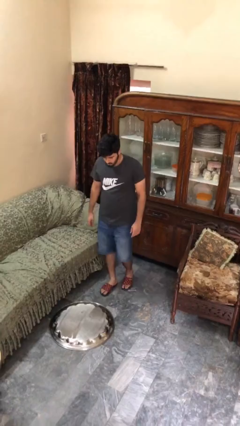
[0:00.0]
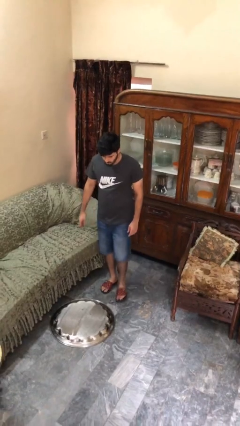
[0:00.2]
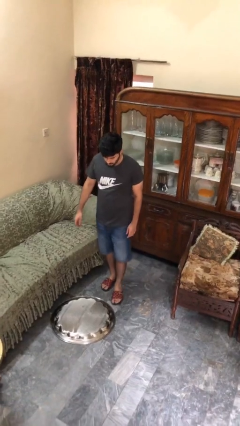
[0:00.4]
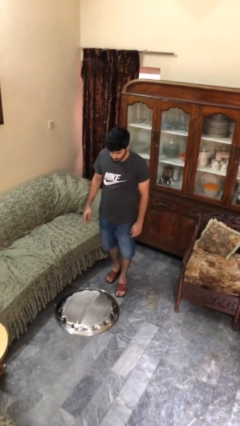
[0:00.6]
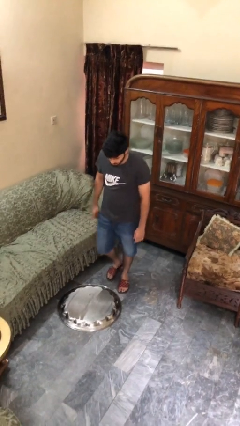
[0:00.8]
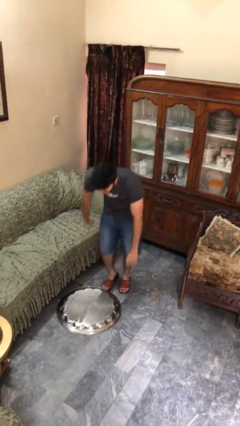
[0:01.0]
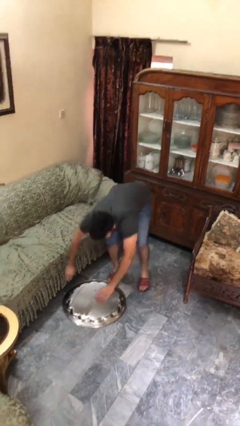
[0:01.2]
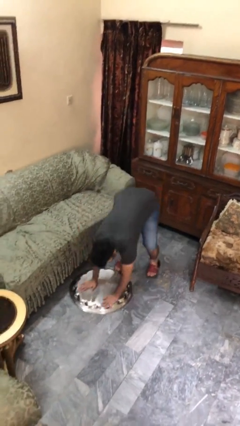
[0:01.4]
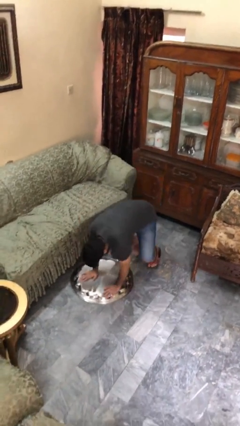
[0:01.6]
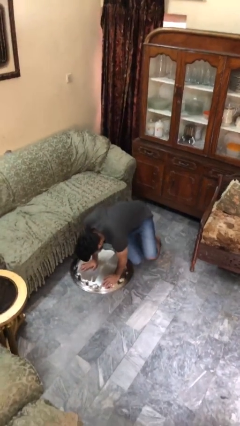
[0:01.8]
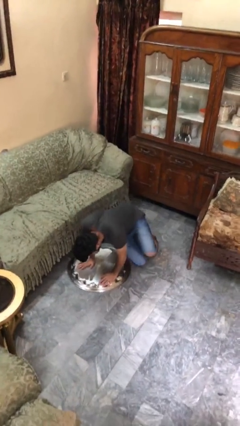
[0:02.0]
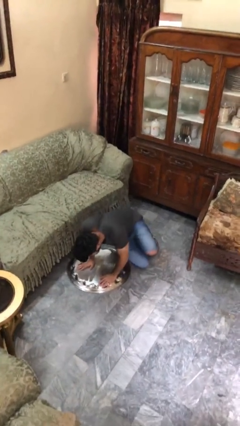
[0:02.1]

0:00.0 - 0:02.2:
person trips on object on floor

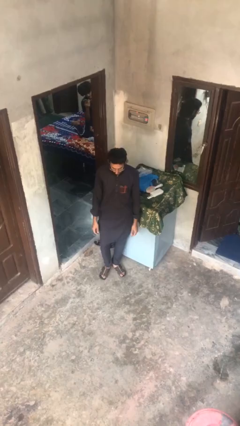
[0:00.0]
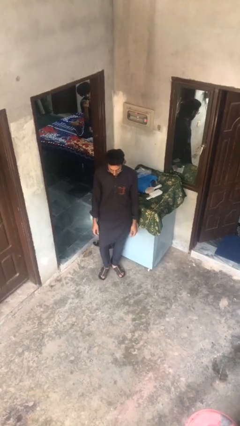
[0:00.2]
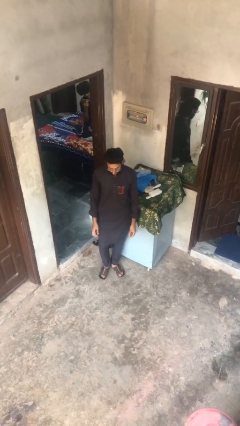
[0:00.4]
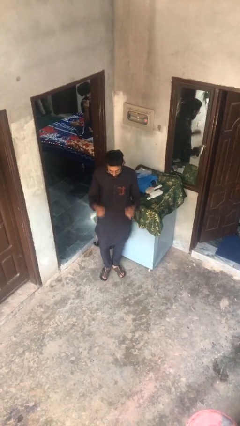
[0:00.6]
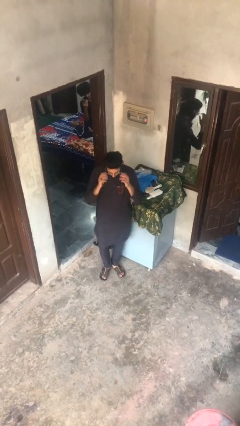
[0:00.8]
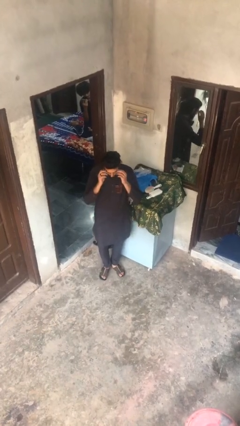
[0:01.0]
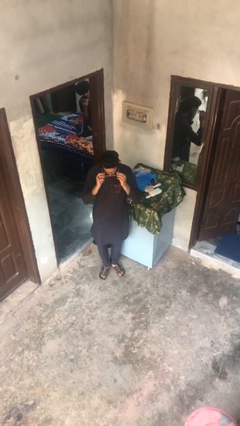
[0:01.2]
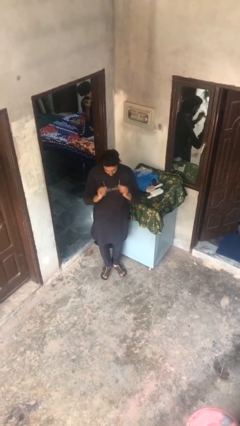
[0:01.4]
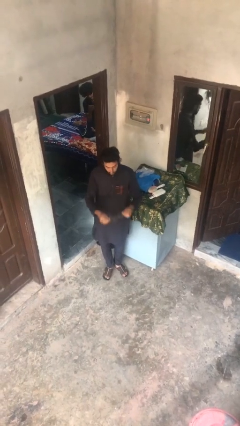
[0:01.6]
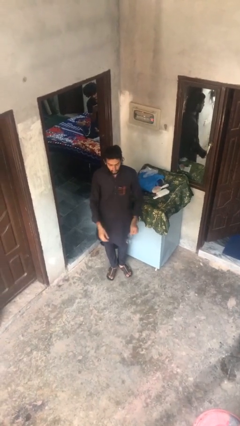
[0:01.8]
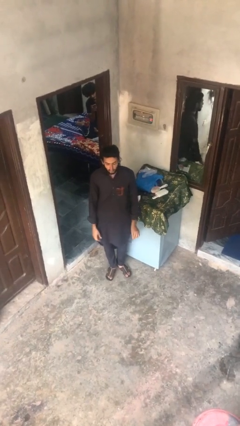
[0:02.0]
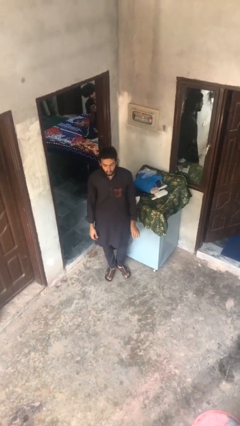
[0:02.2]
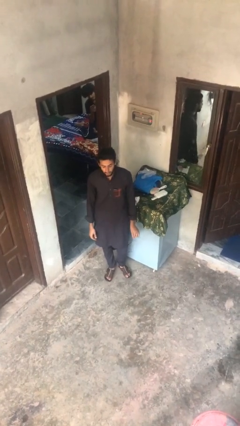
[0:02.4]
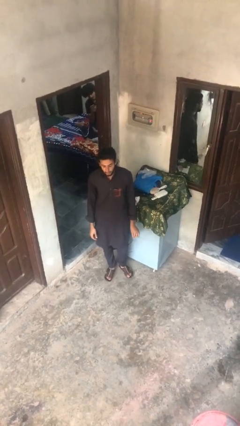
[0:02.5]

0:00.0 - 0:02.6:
person takes off glasses

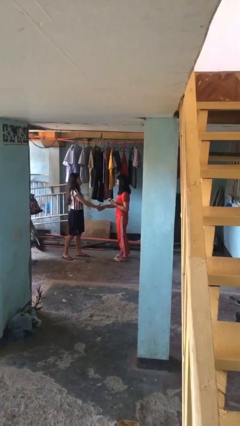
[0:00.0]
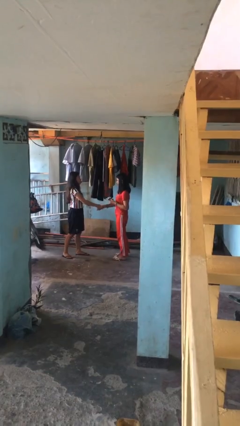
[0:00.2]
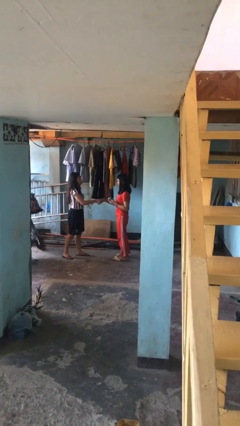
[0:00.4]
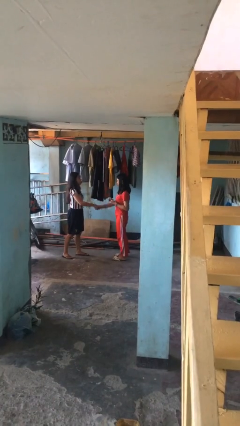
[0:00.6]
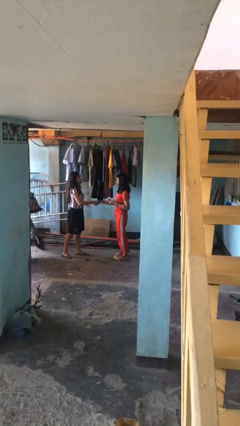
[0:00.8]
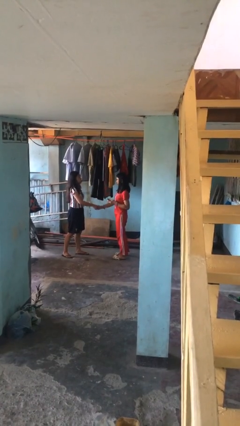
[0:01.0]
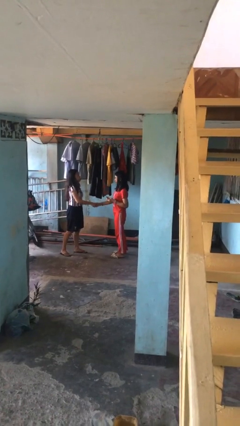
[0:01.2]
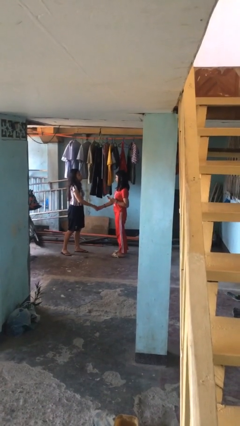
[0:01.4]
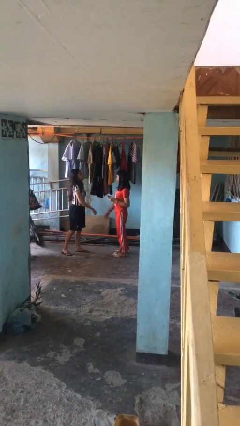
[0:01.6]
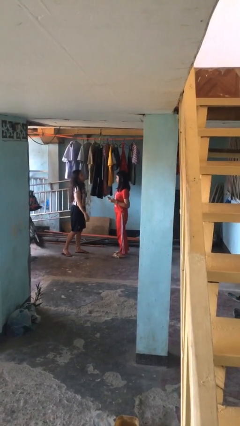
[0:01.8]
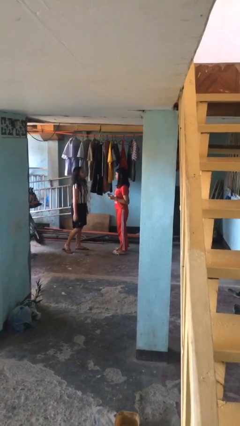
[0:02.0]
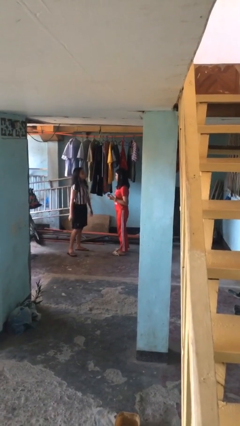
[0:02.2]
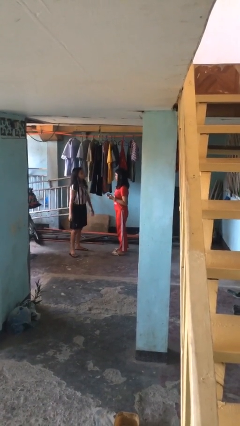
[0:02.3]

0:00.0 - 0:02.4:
person shakes hand

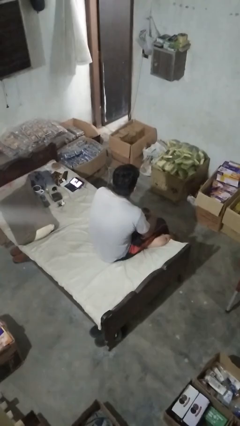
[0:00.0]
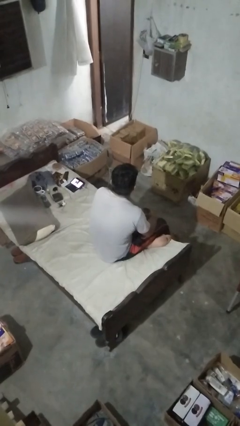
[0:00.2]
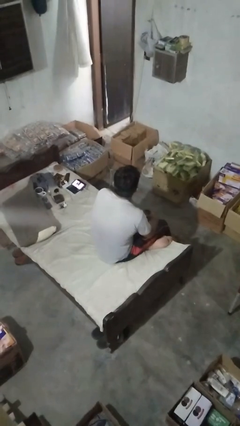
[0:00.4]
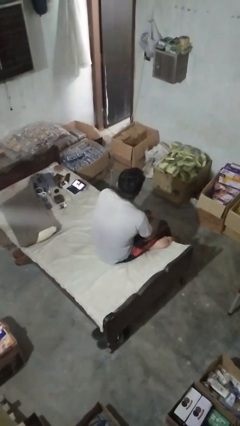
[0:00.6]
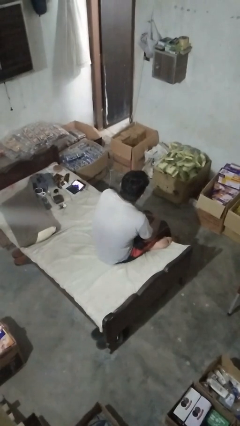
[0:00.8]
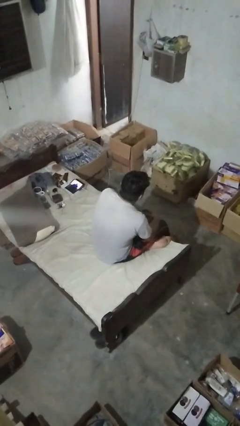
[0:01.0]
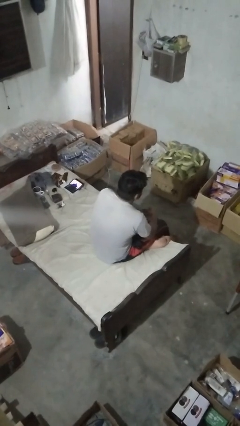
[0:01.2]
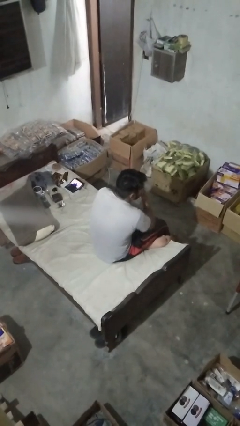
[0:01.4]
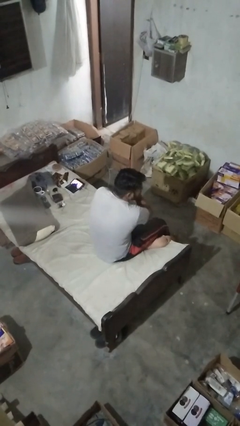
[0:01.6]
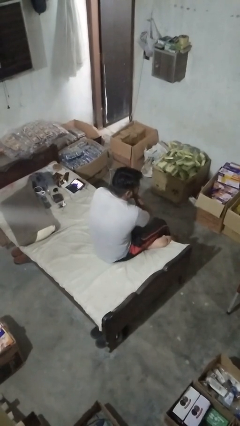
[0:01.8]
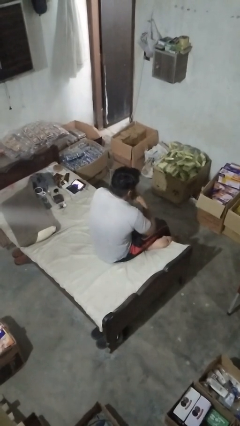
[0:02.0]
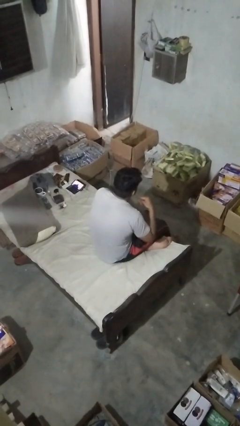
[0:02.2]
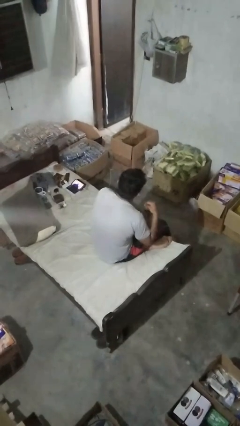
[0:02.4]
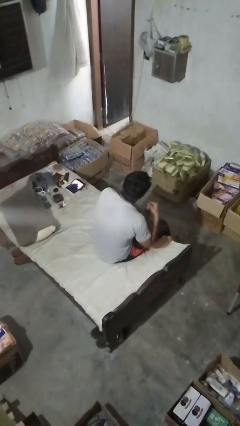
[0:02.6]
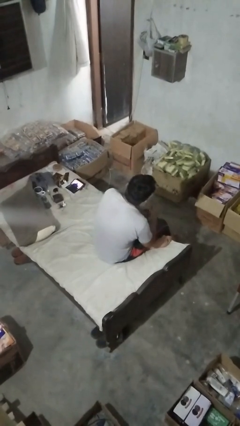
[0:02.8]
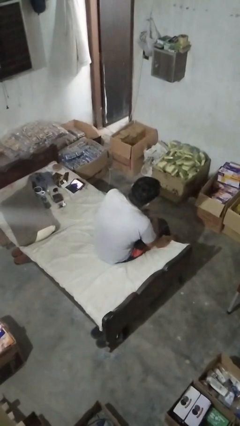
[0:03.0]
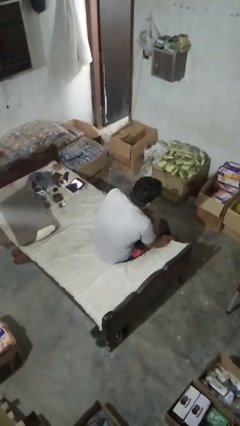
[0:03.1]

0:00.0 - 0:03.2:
person gestures cut

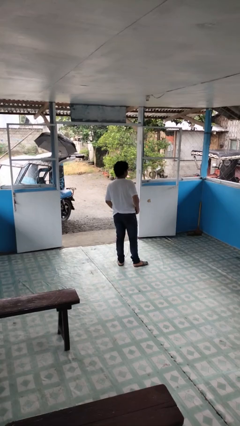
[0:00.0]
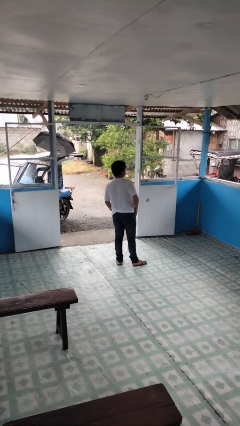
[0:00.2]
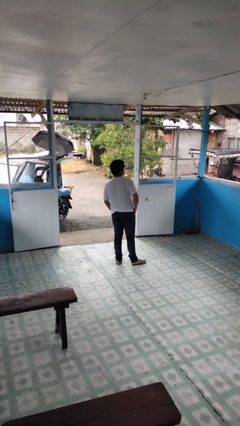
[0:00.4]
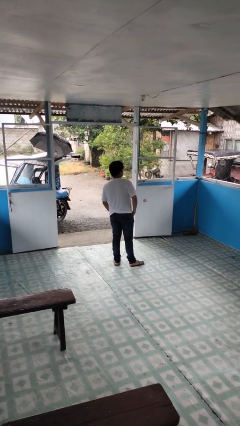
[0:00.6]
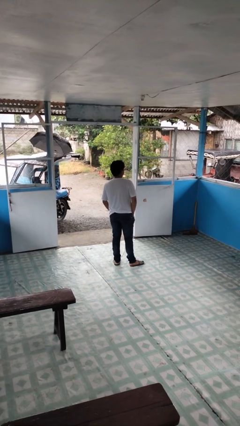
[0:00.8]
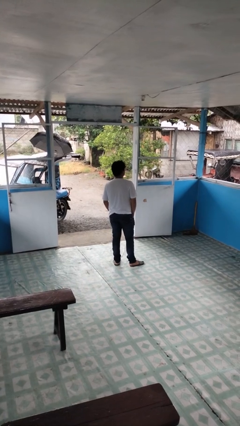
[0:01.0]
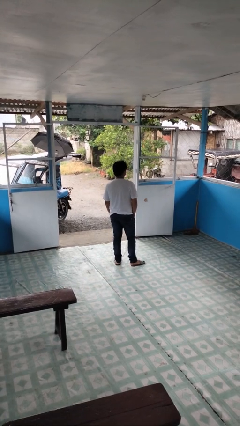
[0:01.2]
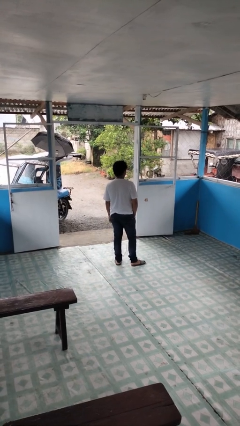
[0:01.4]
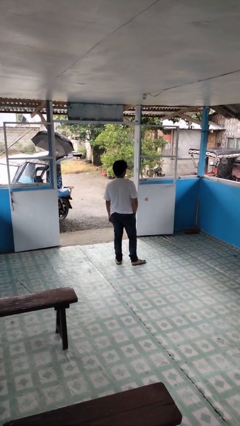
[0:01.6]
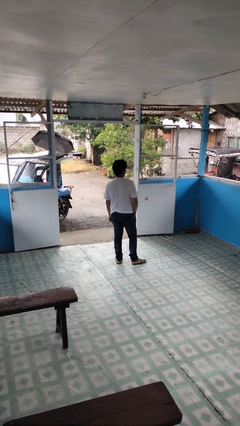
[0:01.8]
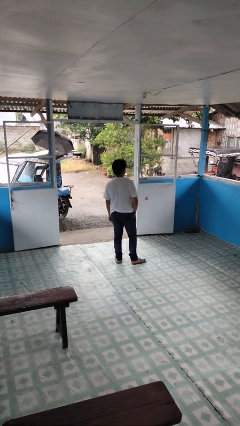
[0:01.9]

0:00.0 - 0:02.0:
person puts hands in back pockets

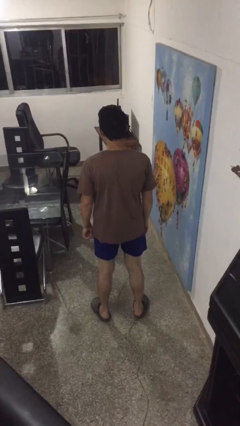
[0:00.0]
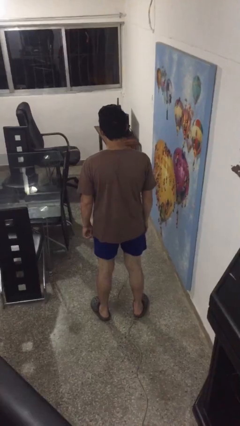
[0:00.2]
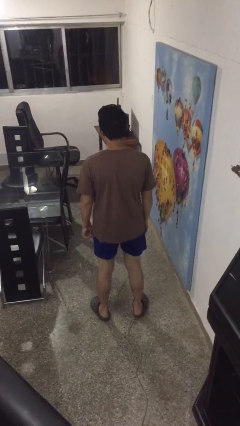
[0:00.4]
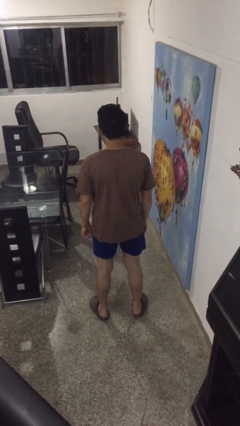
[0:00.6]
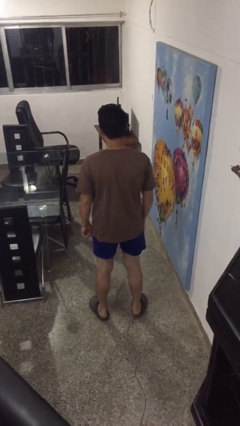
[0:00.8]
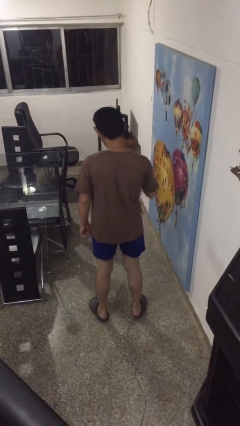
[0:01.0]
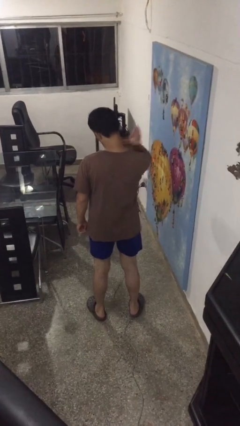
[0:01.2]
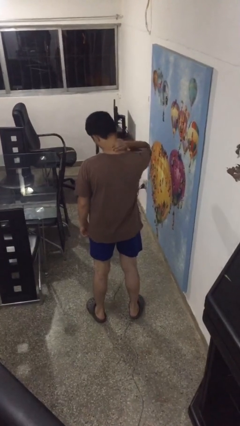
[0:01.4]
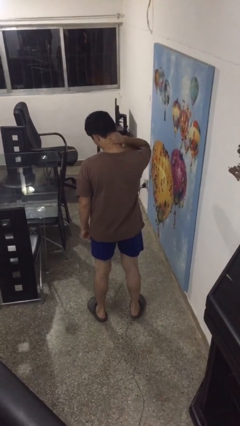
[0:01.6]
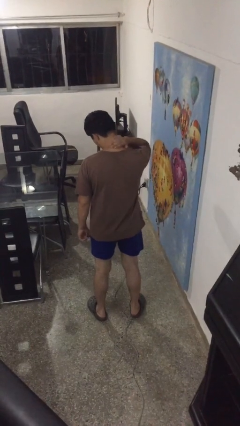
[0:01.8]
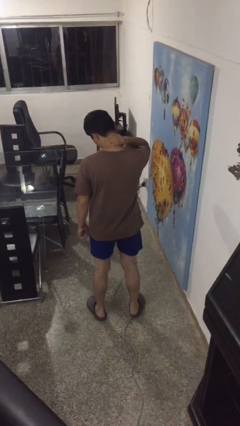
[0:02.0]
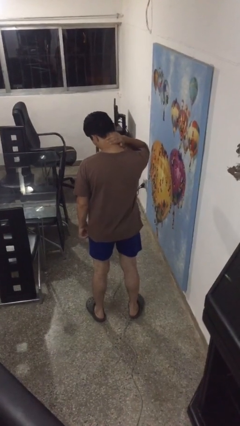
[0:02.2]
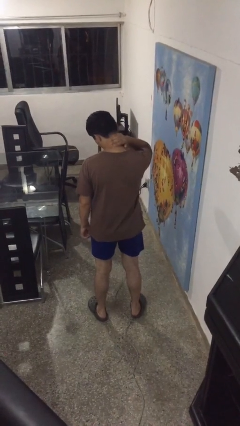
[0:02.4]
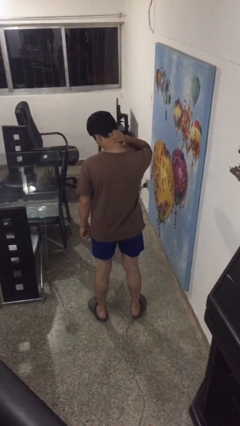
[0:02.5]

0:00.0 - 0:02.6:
person swats bug

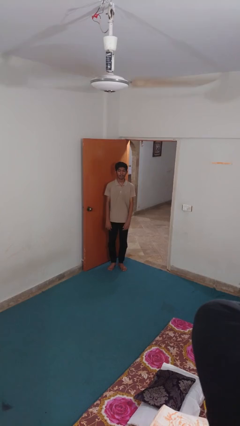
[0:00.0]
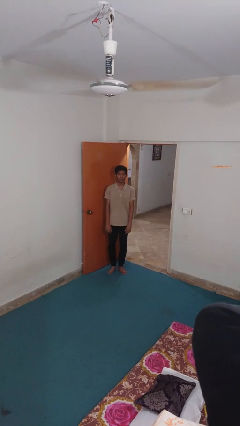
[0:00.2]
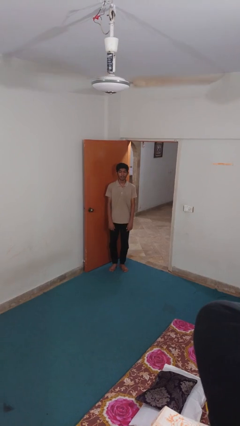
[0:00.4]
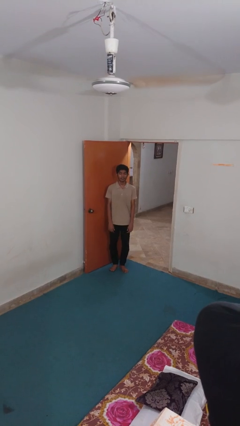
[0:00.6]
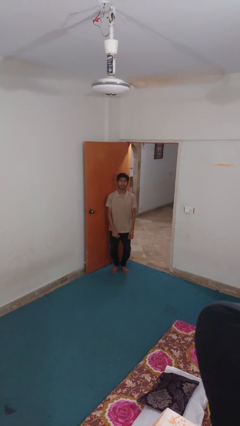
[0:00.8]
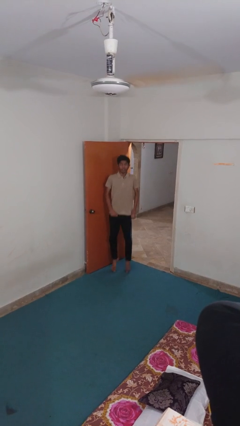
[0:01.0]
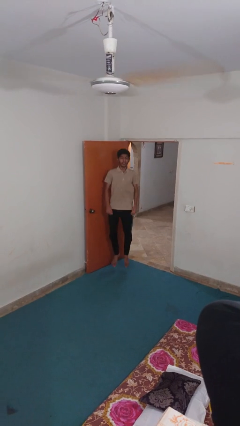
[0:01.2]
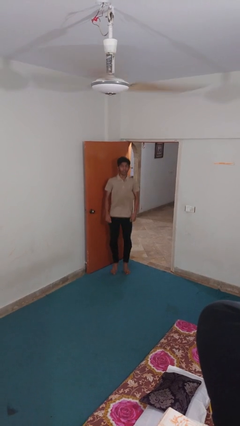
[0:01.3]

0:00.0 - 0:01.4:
person jumps

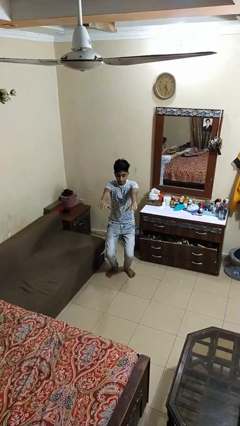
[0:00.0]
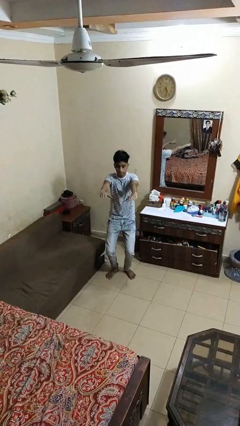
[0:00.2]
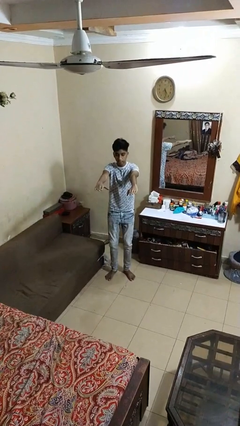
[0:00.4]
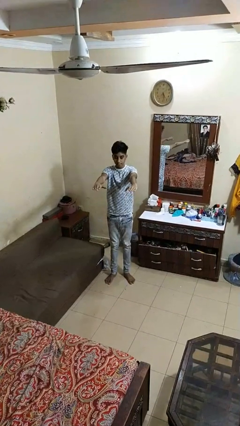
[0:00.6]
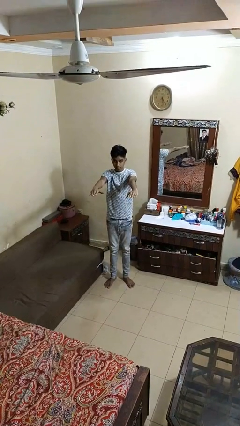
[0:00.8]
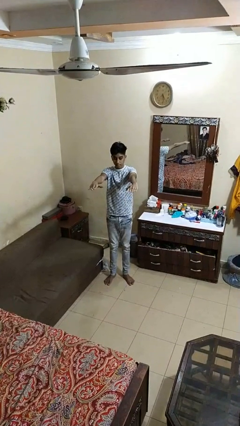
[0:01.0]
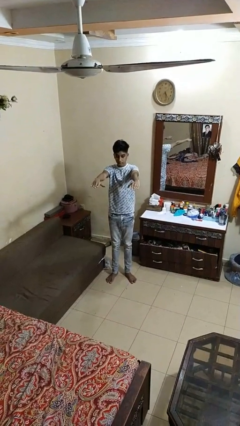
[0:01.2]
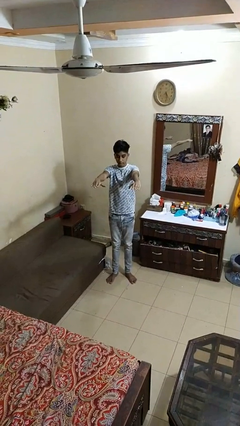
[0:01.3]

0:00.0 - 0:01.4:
person stands up
